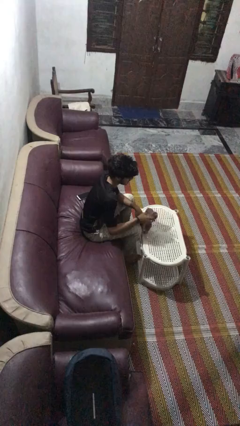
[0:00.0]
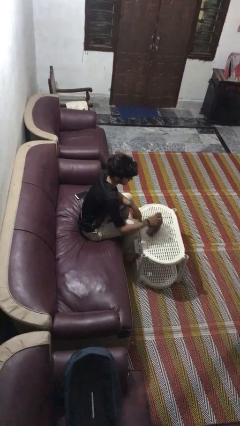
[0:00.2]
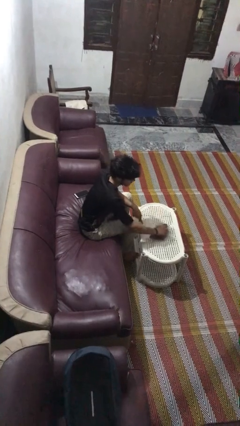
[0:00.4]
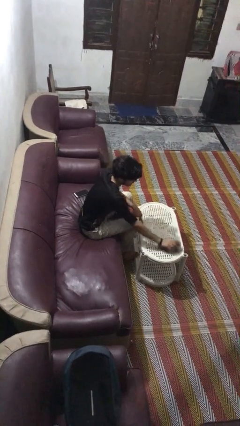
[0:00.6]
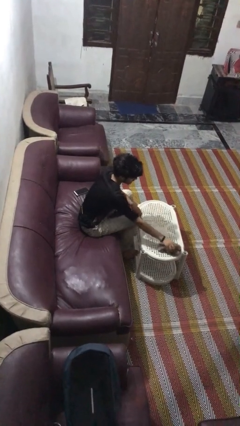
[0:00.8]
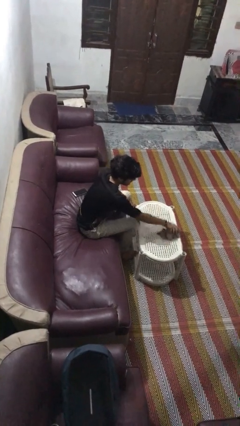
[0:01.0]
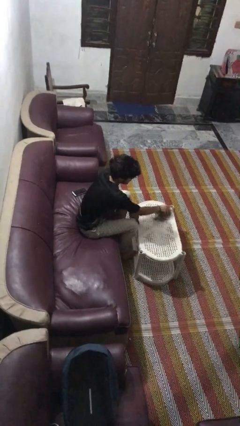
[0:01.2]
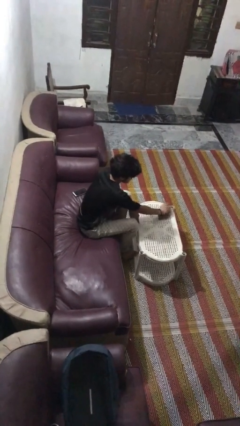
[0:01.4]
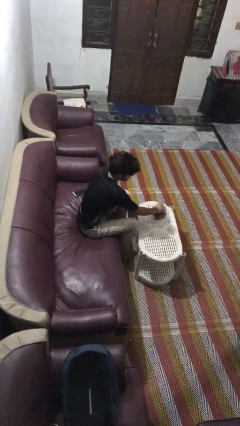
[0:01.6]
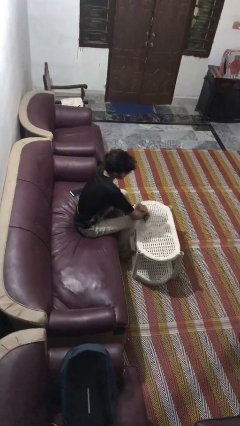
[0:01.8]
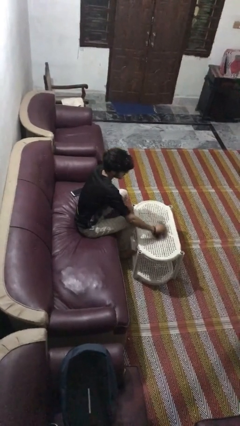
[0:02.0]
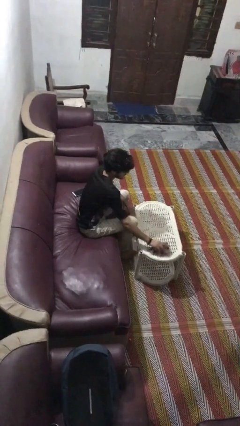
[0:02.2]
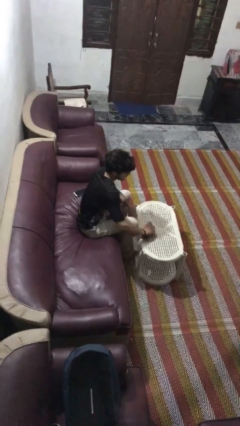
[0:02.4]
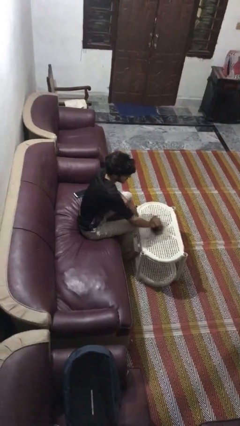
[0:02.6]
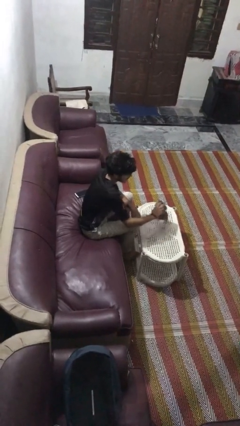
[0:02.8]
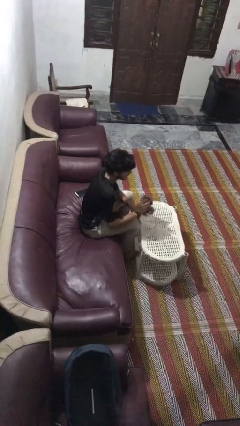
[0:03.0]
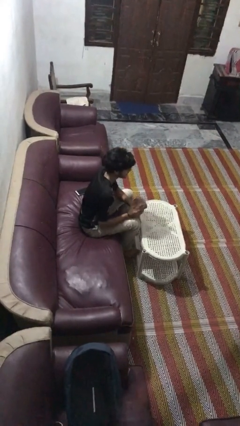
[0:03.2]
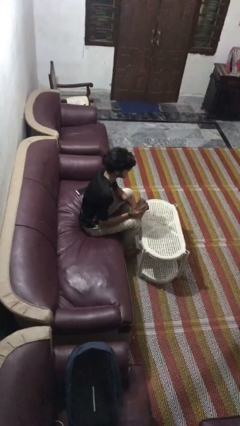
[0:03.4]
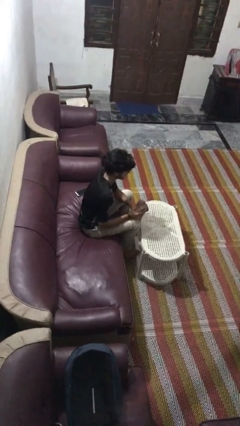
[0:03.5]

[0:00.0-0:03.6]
person cleans table with rag

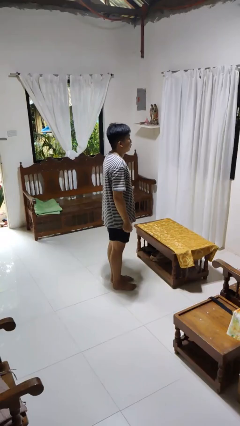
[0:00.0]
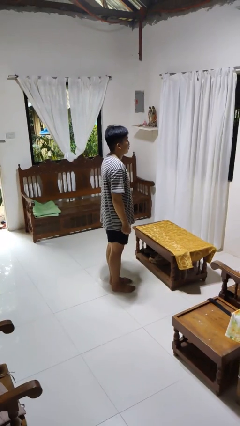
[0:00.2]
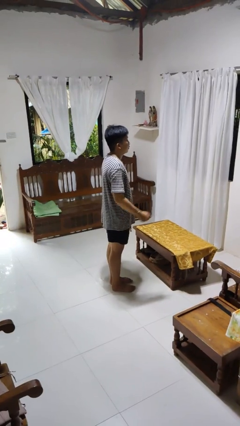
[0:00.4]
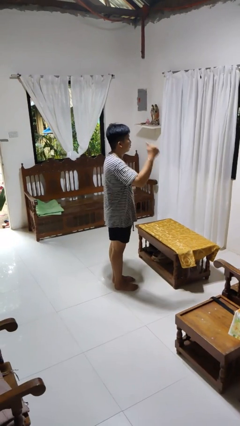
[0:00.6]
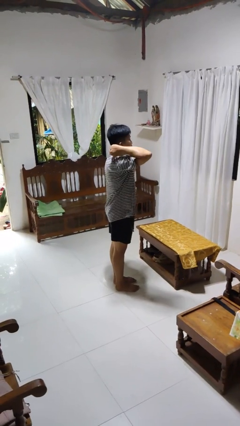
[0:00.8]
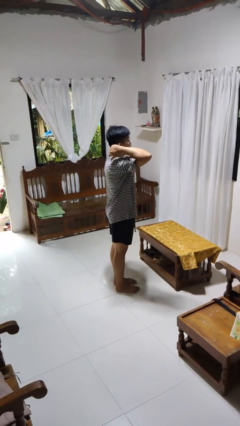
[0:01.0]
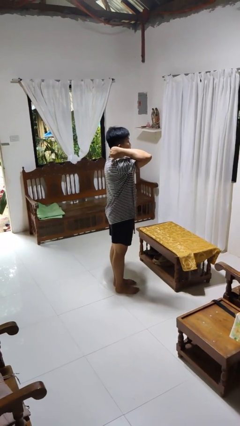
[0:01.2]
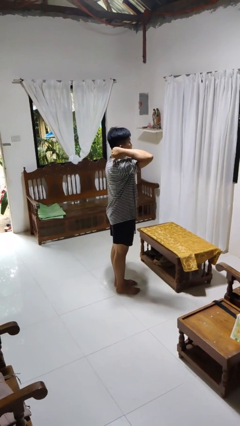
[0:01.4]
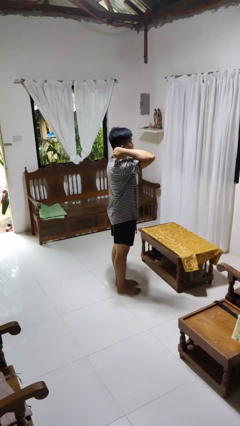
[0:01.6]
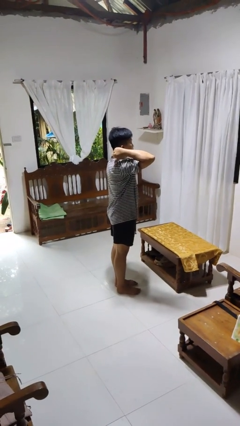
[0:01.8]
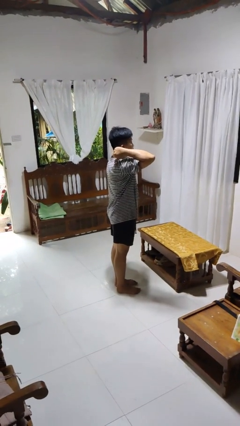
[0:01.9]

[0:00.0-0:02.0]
person gestures behind me

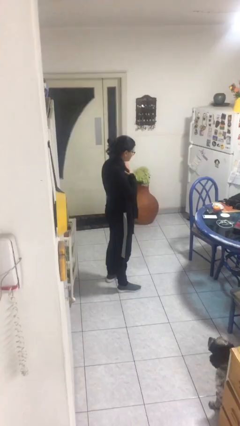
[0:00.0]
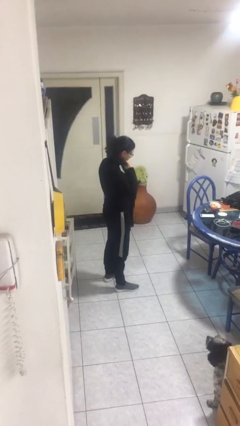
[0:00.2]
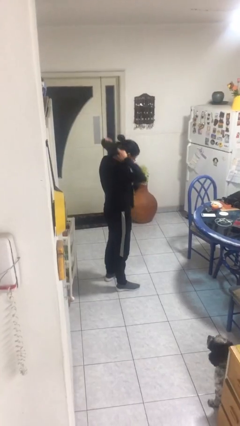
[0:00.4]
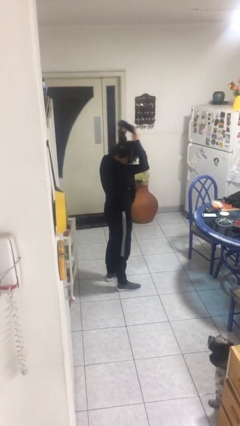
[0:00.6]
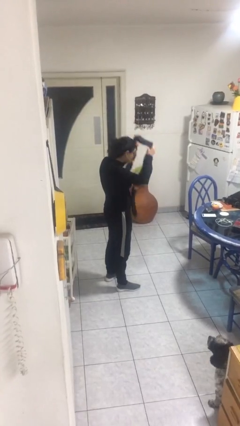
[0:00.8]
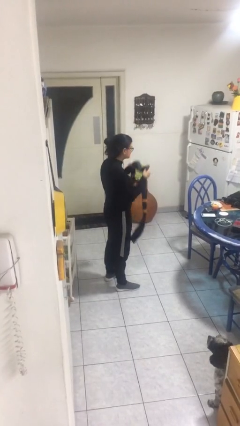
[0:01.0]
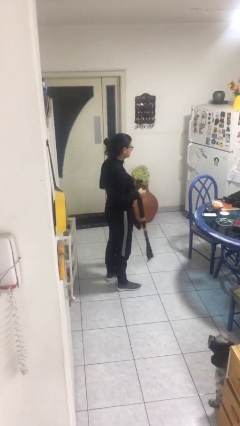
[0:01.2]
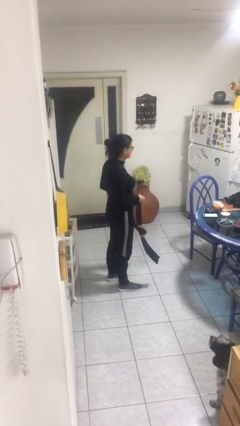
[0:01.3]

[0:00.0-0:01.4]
person takes off scarf

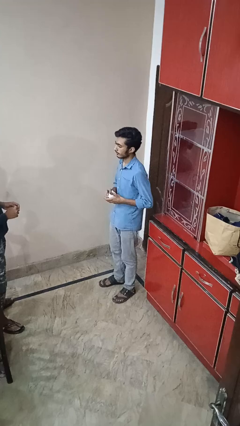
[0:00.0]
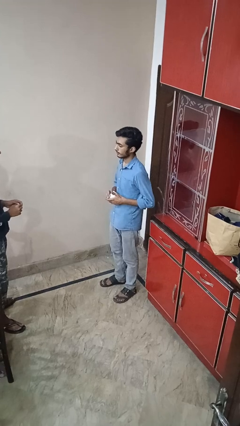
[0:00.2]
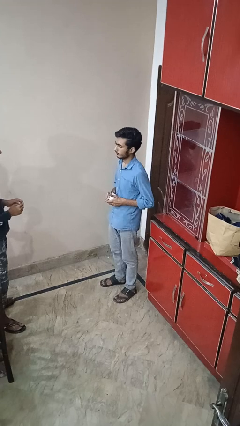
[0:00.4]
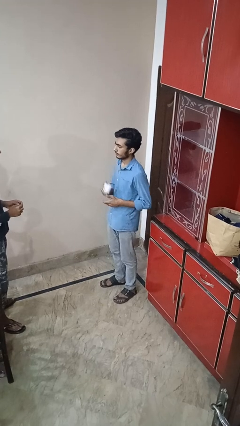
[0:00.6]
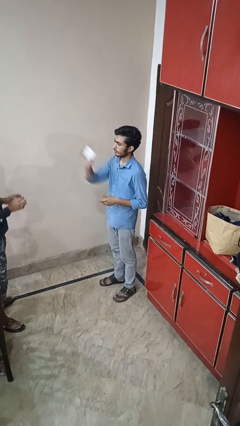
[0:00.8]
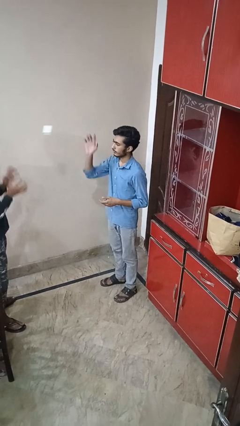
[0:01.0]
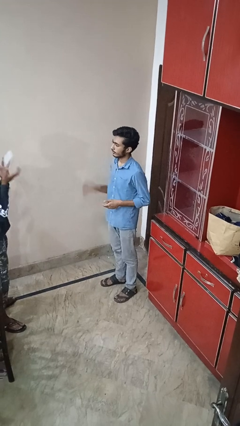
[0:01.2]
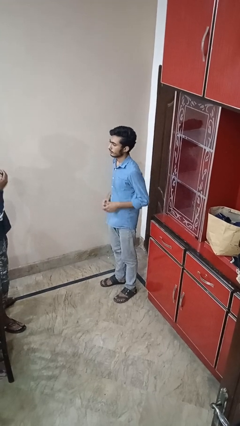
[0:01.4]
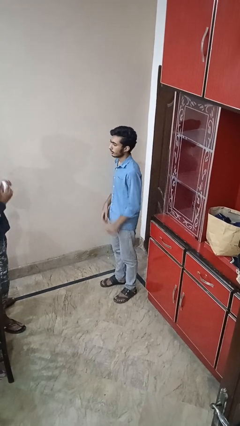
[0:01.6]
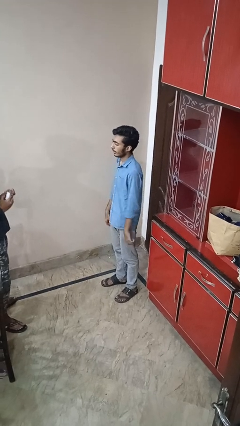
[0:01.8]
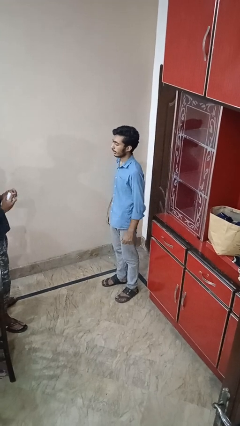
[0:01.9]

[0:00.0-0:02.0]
person throws object to person

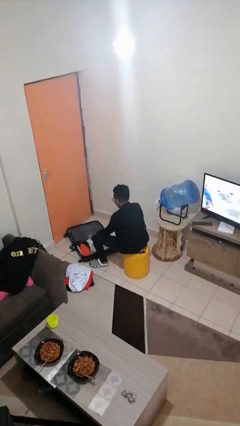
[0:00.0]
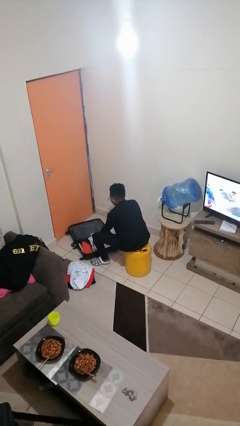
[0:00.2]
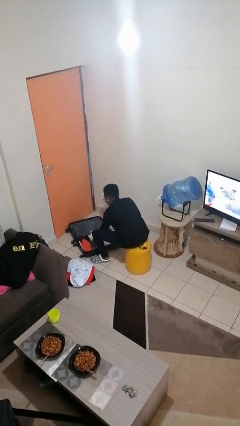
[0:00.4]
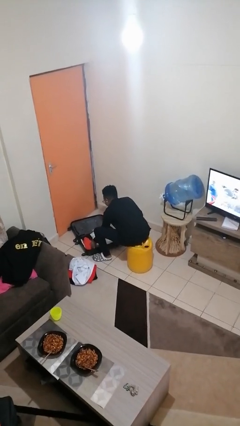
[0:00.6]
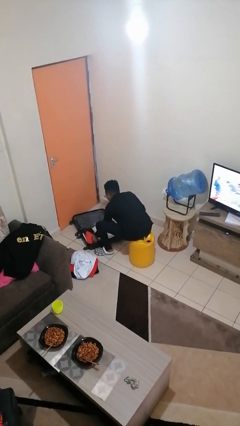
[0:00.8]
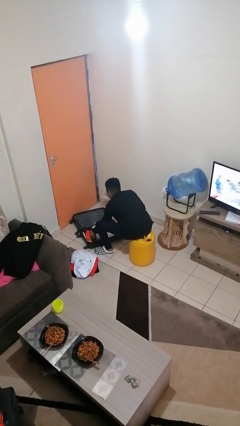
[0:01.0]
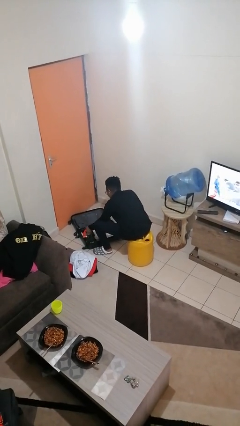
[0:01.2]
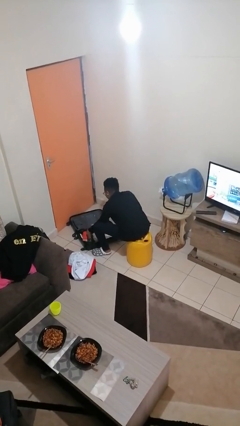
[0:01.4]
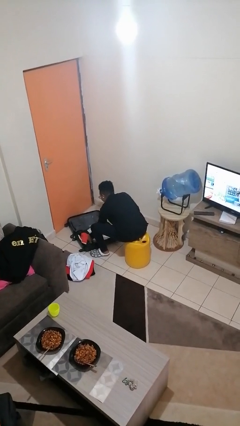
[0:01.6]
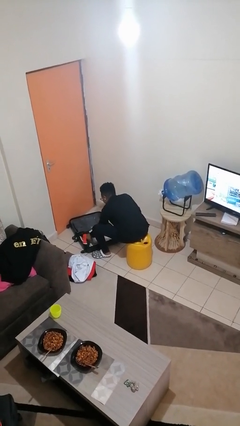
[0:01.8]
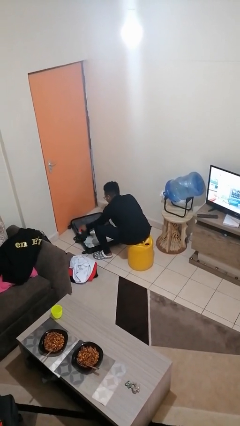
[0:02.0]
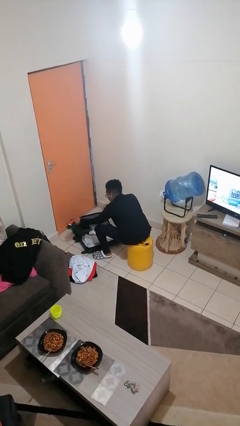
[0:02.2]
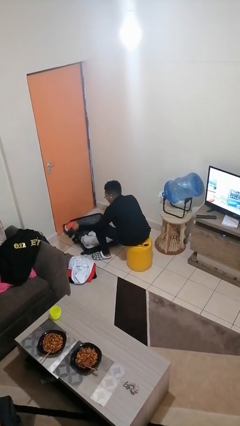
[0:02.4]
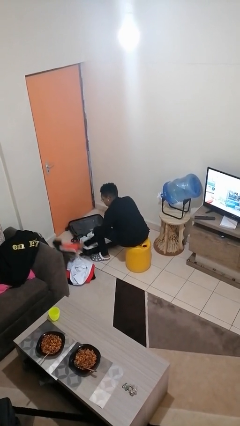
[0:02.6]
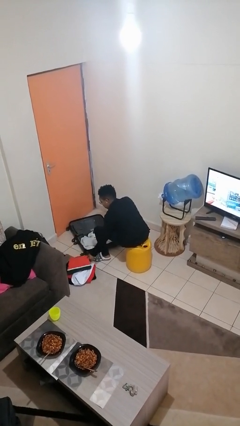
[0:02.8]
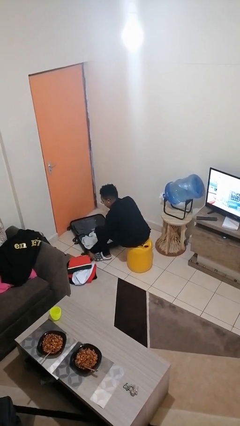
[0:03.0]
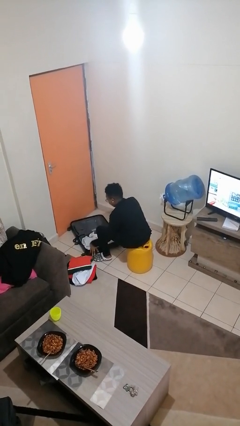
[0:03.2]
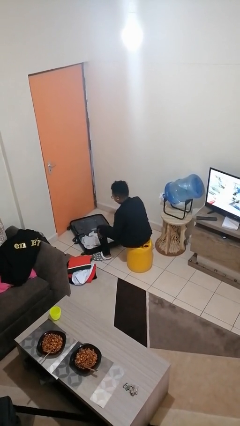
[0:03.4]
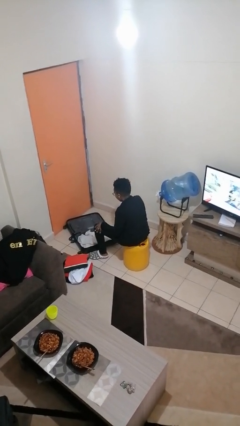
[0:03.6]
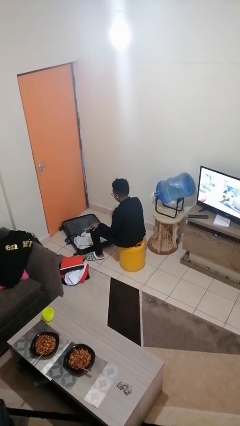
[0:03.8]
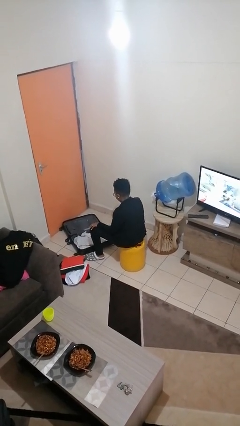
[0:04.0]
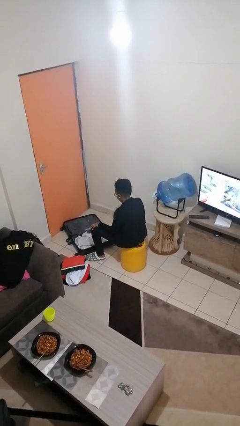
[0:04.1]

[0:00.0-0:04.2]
person unloads clothes from suitcase

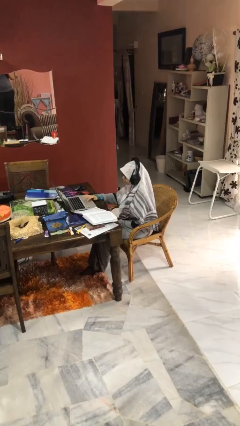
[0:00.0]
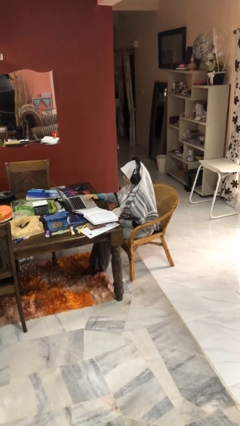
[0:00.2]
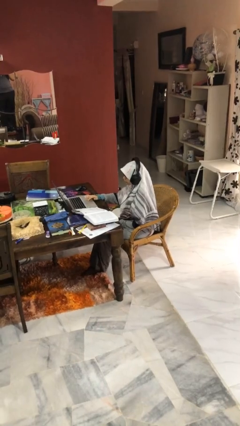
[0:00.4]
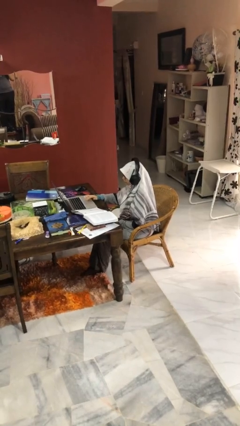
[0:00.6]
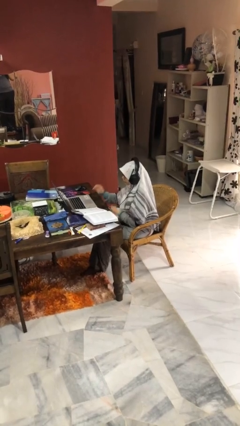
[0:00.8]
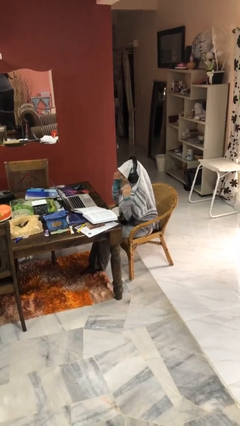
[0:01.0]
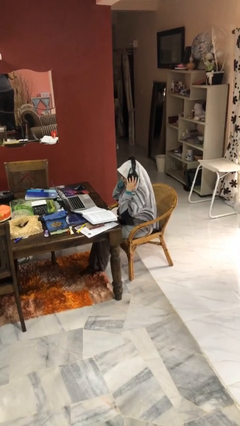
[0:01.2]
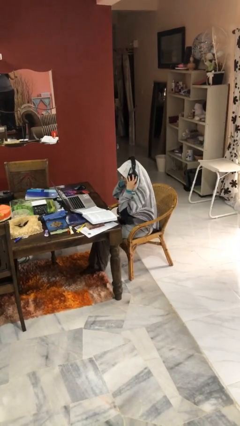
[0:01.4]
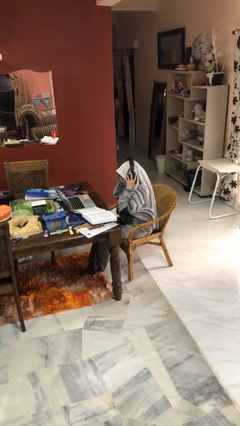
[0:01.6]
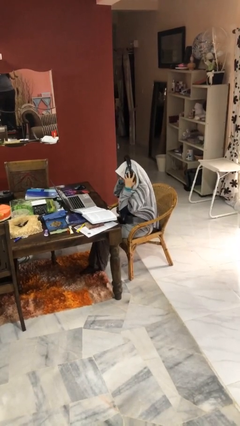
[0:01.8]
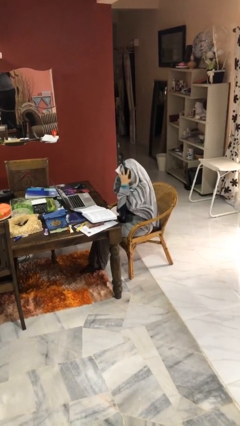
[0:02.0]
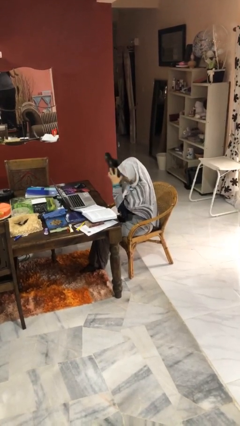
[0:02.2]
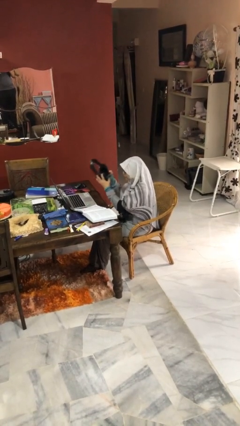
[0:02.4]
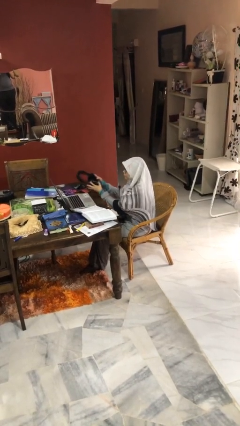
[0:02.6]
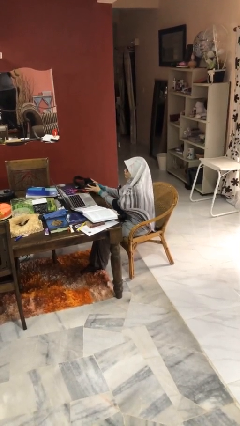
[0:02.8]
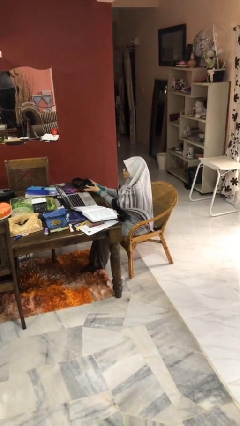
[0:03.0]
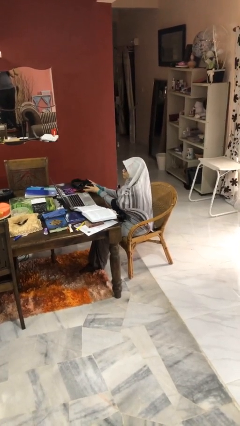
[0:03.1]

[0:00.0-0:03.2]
person takes off headphones

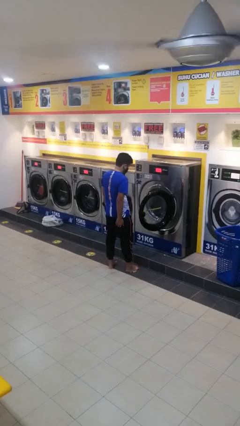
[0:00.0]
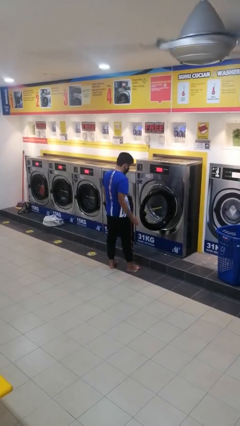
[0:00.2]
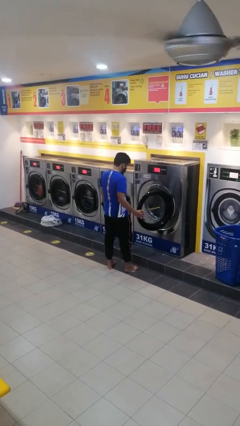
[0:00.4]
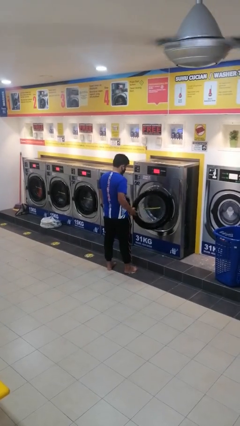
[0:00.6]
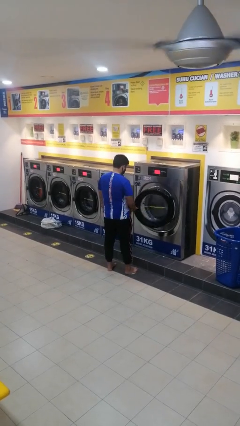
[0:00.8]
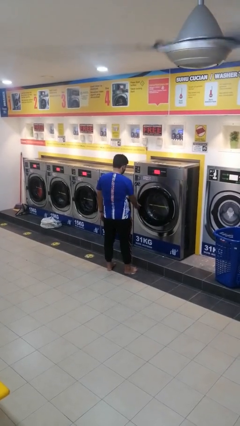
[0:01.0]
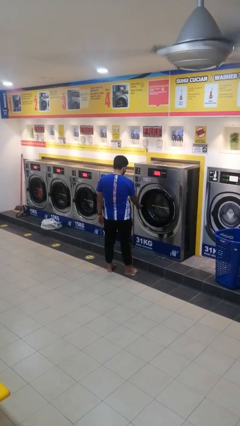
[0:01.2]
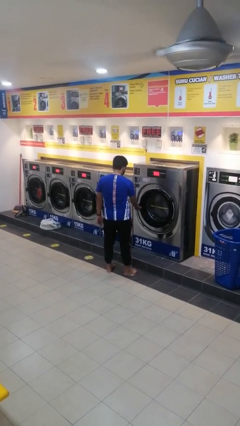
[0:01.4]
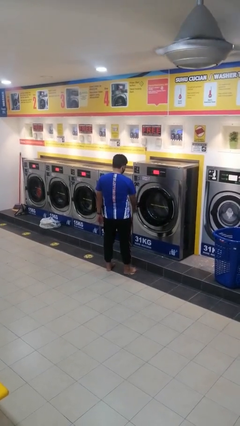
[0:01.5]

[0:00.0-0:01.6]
person closes clothes washer
